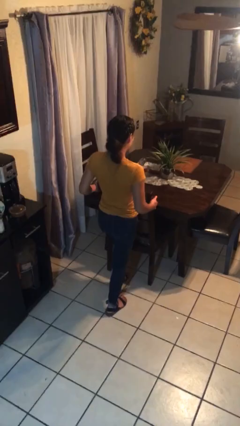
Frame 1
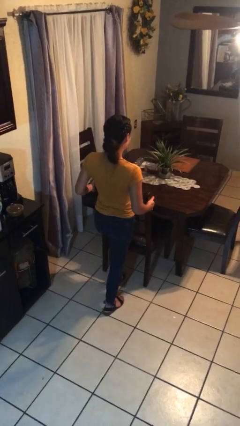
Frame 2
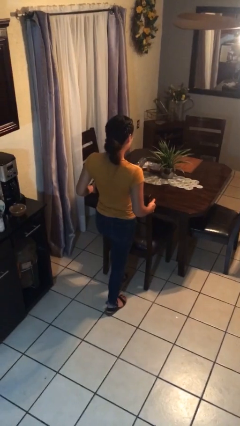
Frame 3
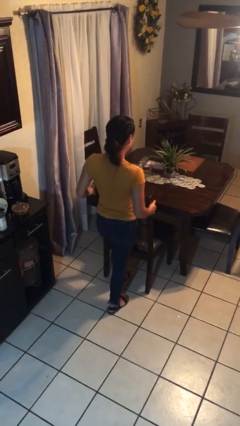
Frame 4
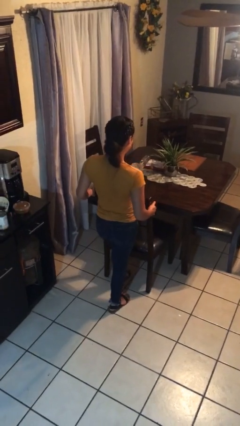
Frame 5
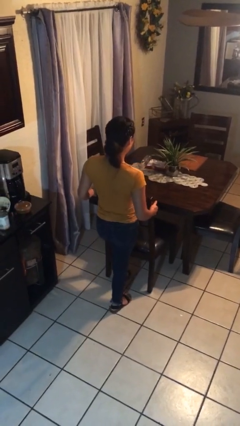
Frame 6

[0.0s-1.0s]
person pulls out chair

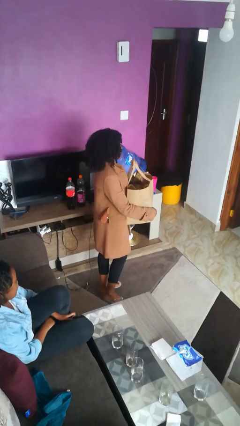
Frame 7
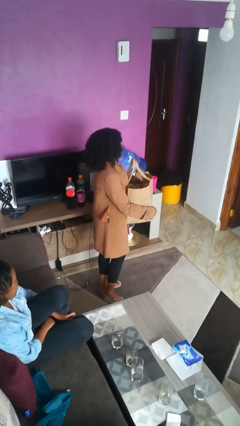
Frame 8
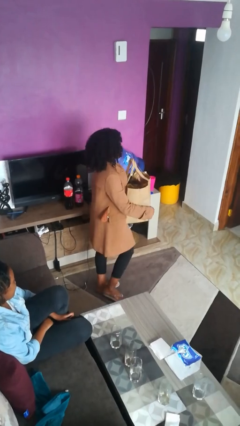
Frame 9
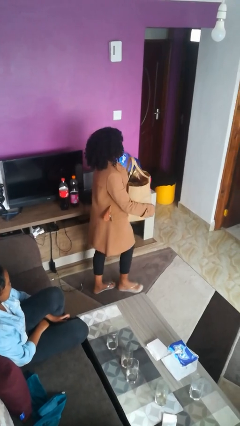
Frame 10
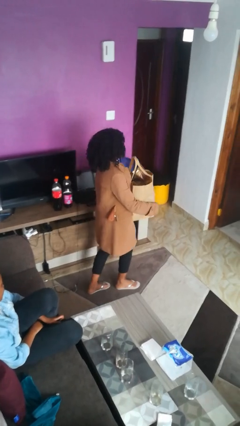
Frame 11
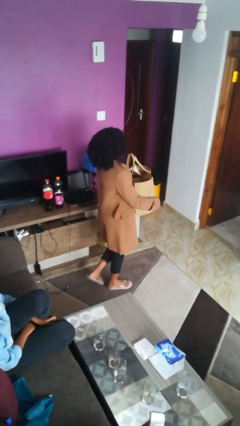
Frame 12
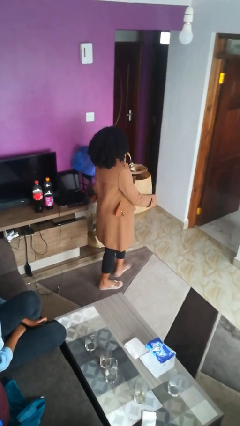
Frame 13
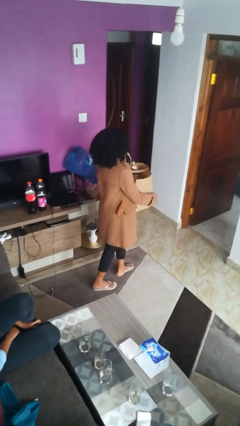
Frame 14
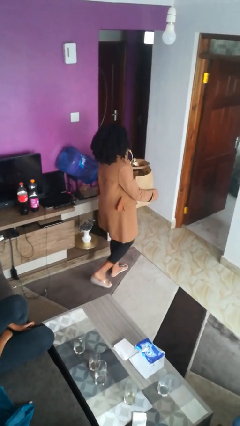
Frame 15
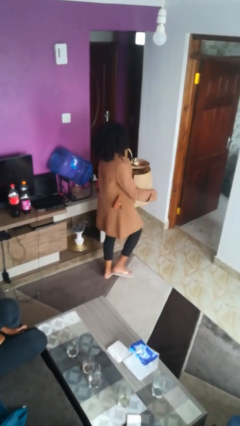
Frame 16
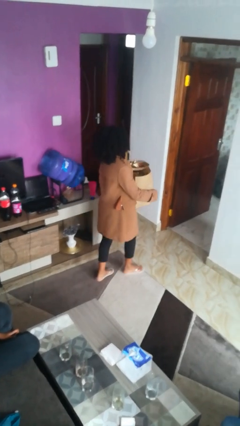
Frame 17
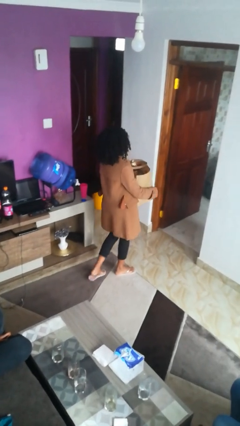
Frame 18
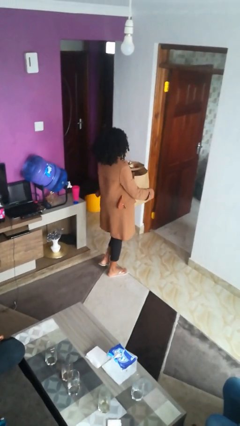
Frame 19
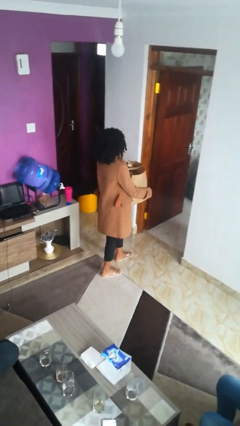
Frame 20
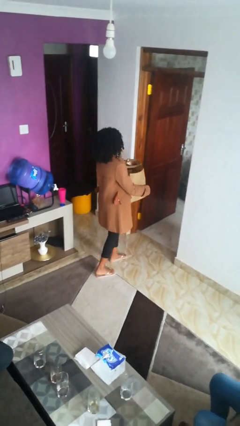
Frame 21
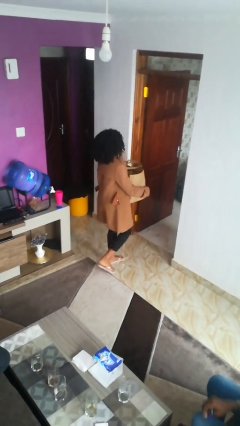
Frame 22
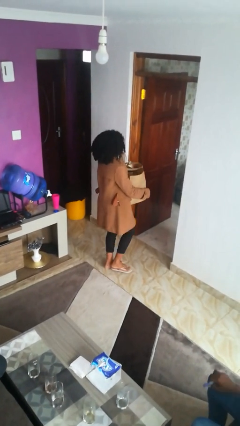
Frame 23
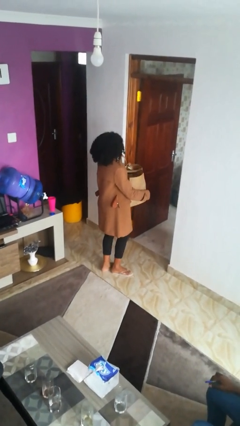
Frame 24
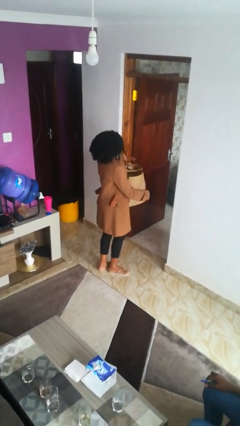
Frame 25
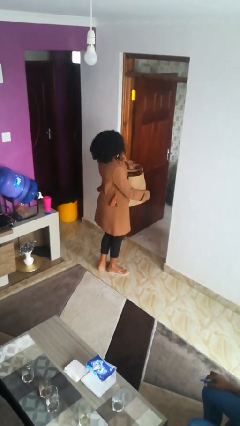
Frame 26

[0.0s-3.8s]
person carries groceries

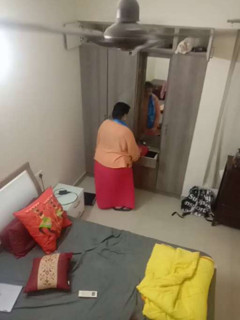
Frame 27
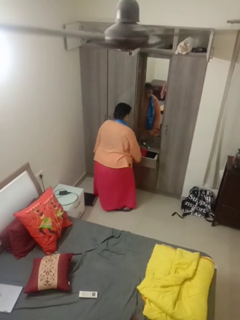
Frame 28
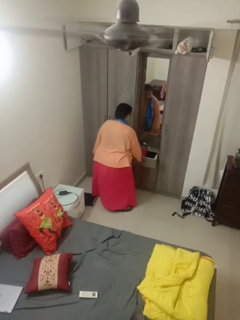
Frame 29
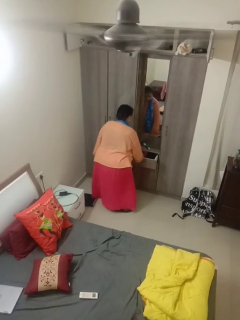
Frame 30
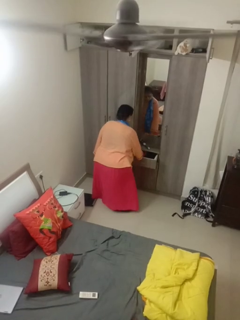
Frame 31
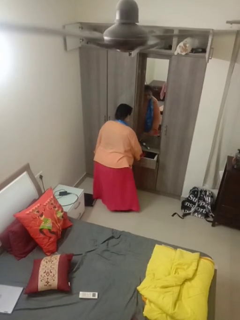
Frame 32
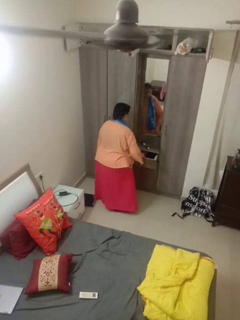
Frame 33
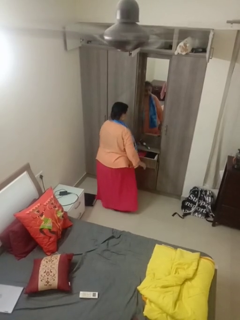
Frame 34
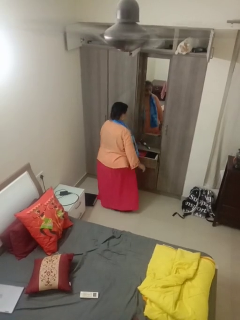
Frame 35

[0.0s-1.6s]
person puts clothes into dresser

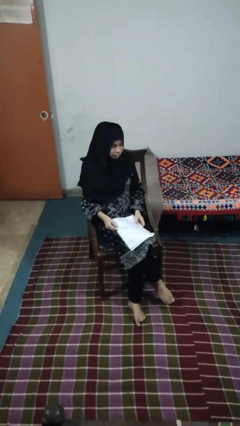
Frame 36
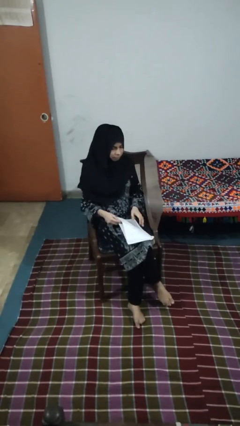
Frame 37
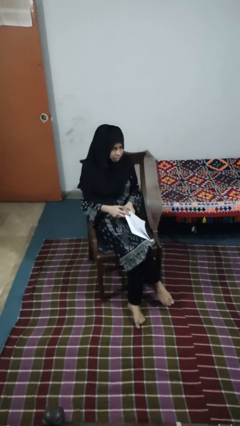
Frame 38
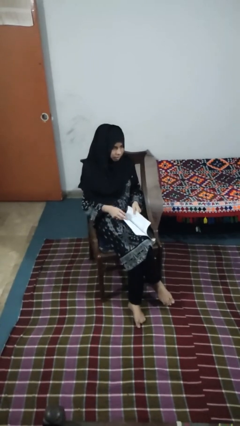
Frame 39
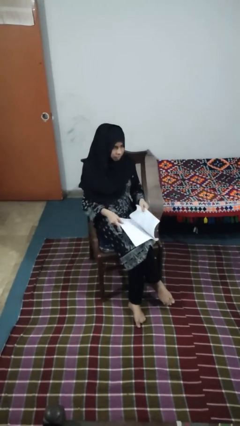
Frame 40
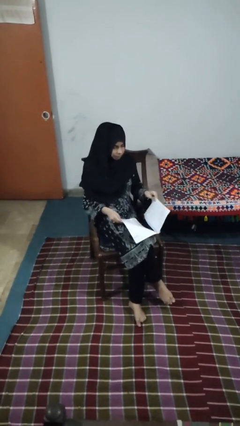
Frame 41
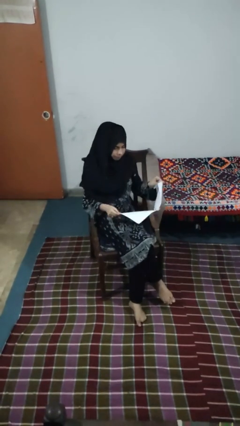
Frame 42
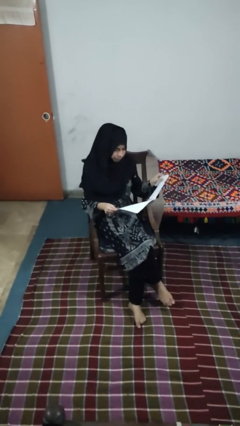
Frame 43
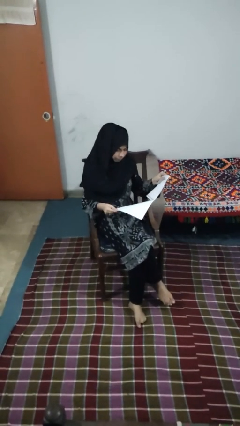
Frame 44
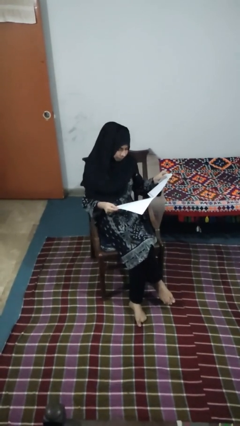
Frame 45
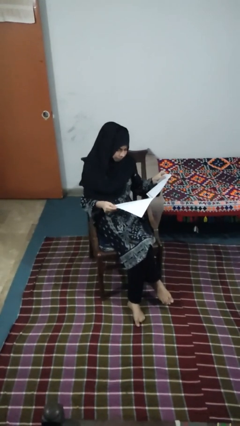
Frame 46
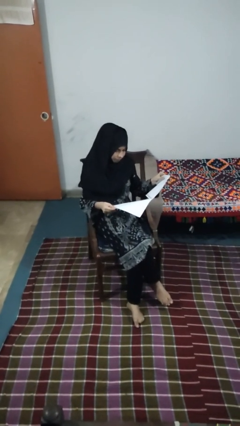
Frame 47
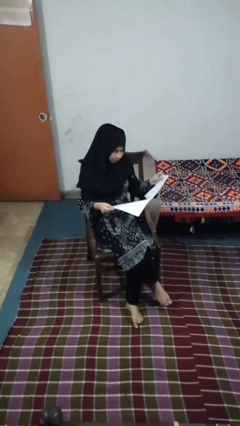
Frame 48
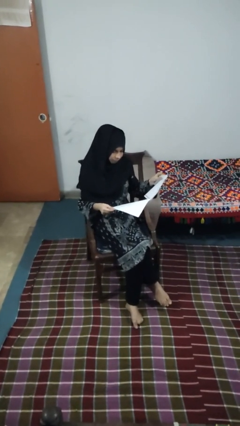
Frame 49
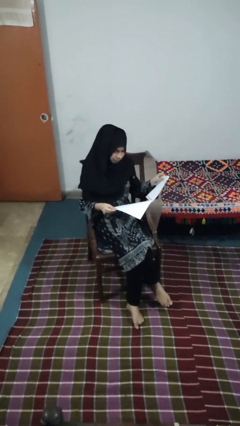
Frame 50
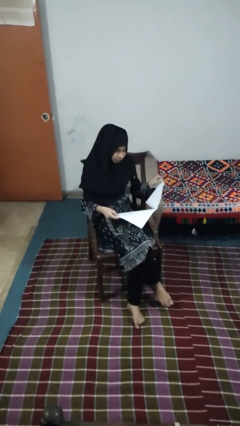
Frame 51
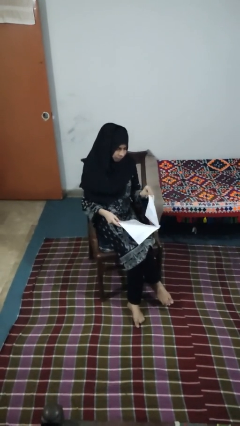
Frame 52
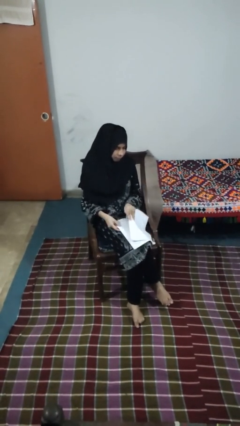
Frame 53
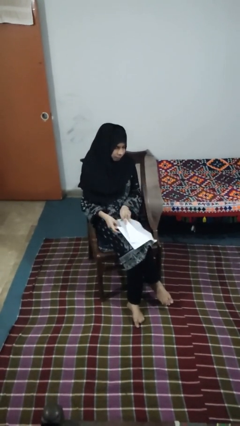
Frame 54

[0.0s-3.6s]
person reads newspaper

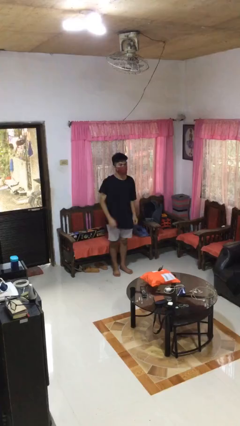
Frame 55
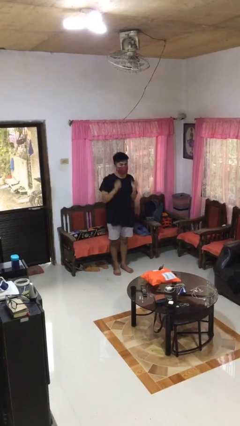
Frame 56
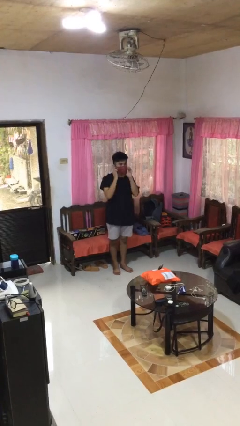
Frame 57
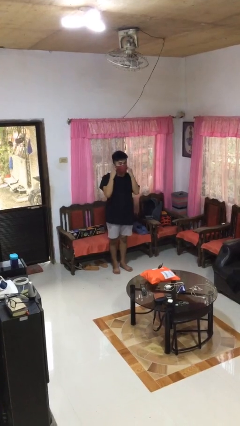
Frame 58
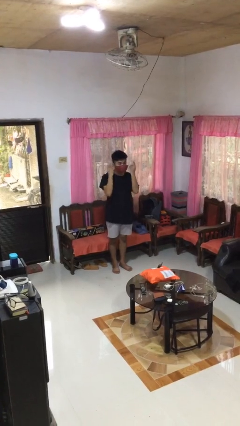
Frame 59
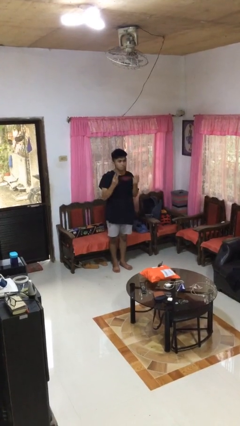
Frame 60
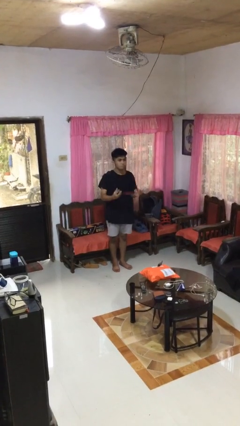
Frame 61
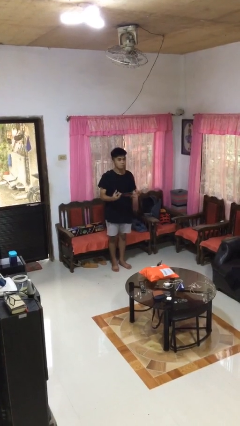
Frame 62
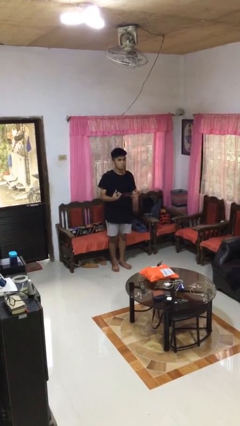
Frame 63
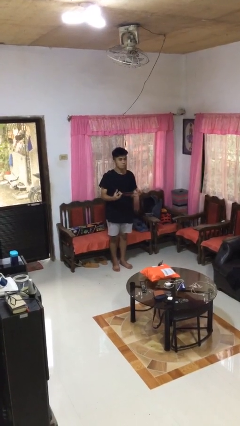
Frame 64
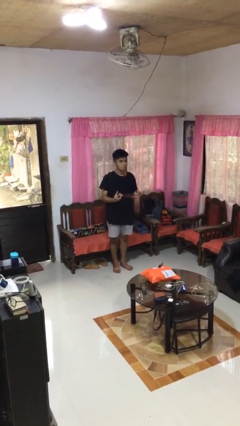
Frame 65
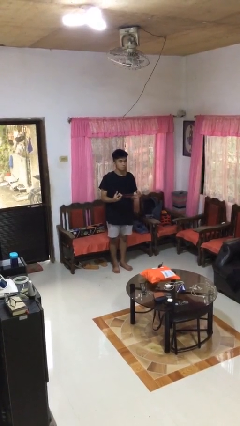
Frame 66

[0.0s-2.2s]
person takes off facemask

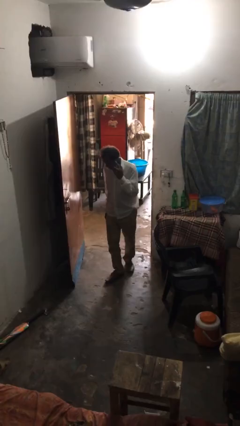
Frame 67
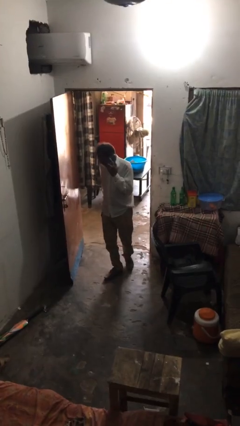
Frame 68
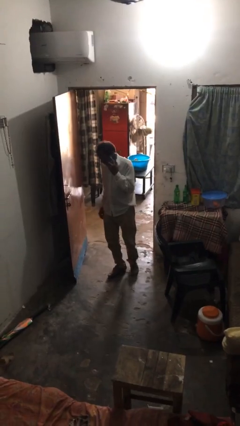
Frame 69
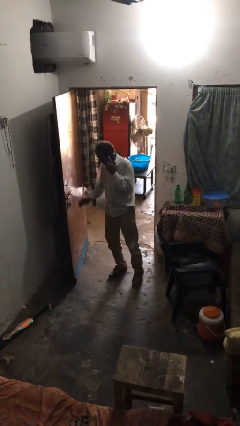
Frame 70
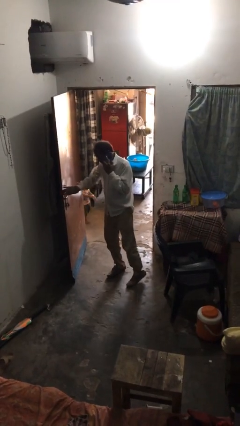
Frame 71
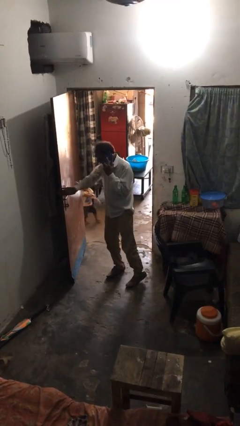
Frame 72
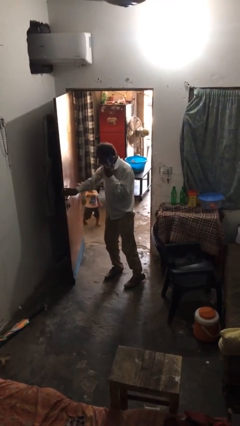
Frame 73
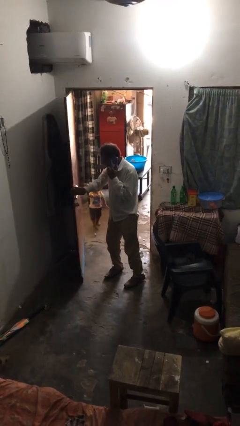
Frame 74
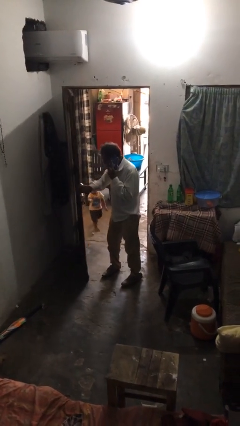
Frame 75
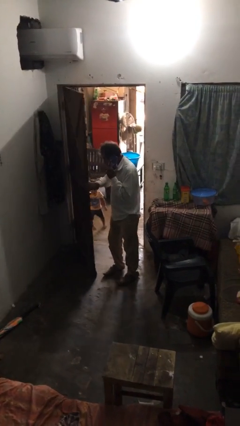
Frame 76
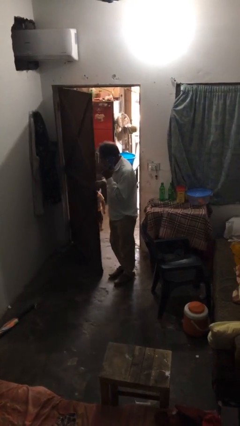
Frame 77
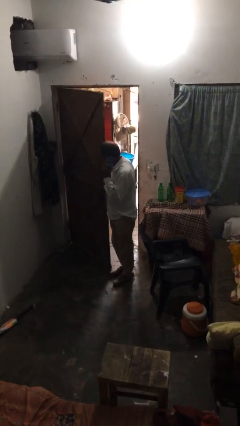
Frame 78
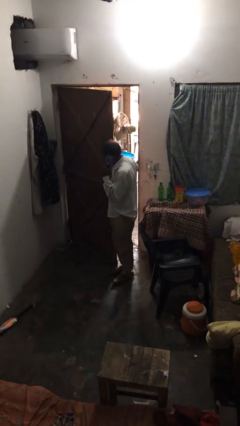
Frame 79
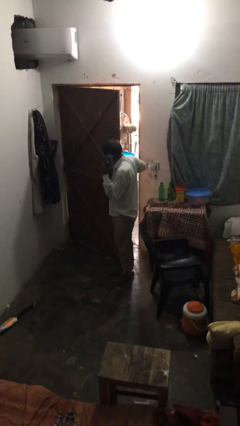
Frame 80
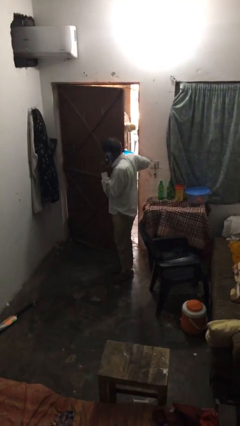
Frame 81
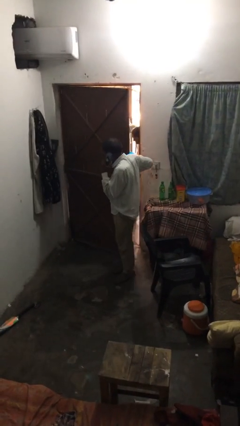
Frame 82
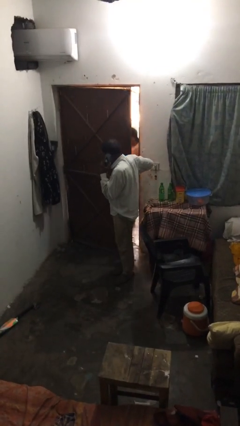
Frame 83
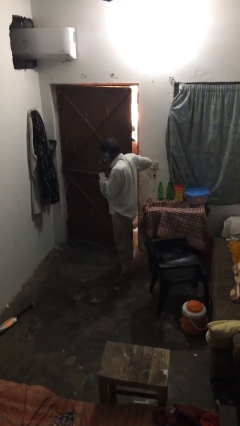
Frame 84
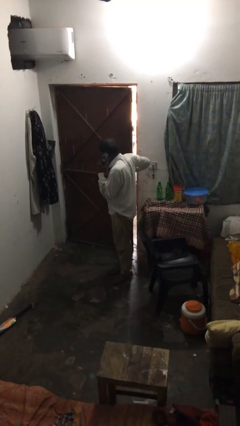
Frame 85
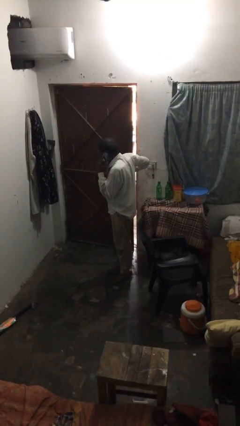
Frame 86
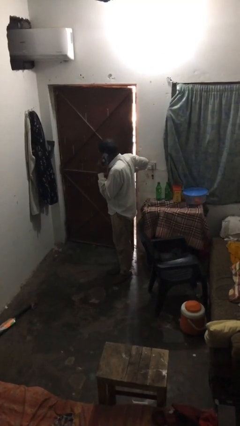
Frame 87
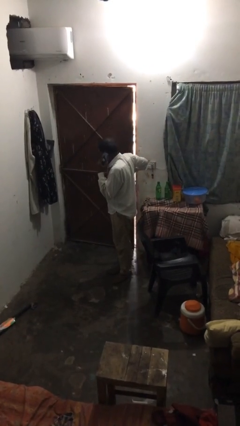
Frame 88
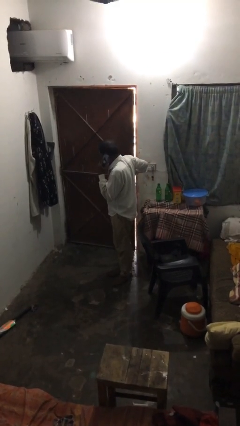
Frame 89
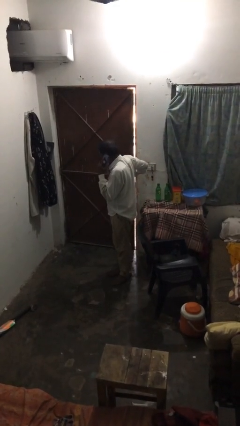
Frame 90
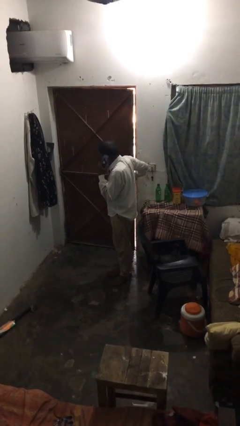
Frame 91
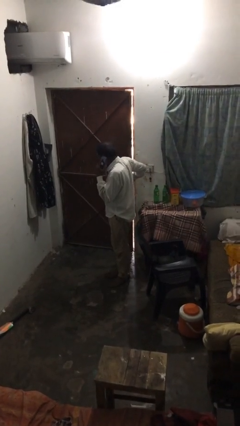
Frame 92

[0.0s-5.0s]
person closes facility door
